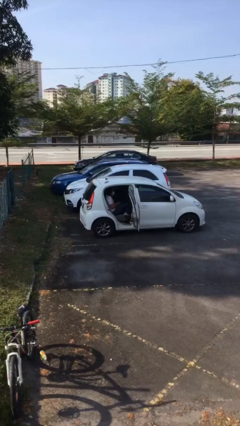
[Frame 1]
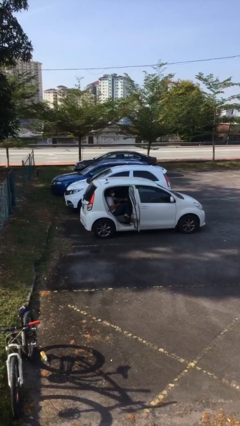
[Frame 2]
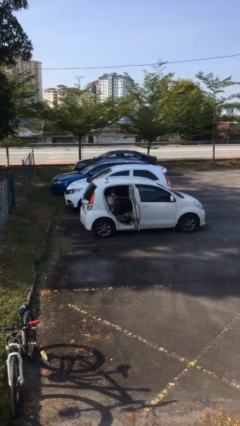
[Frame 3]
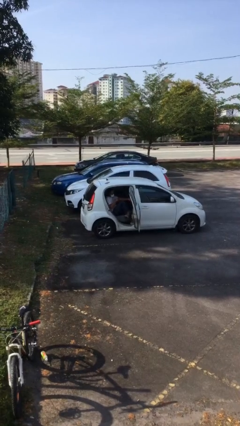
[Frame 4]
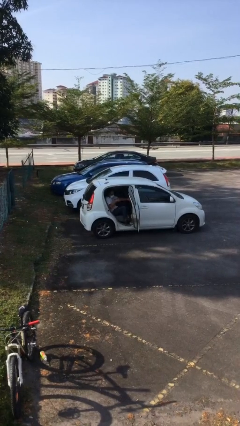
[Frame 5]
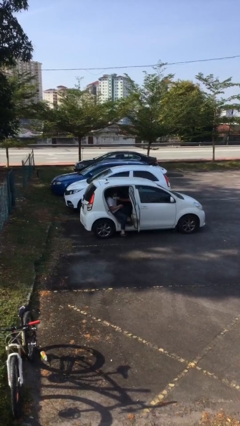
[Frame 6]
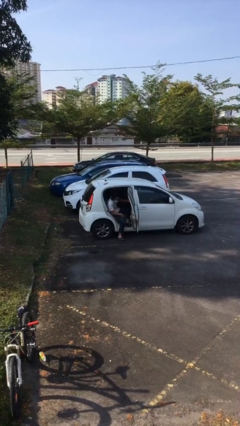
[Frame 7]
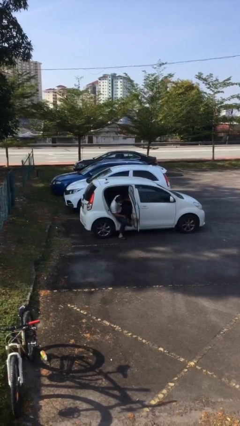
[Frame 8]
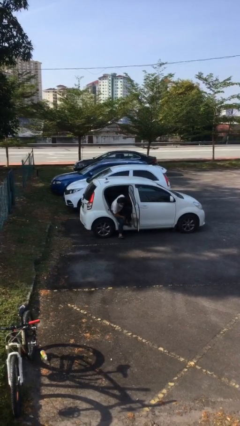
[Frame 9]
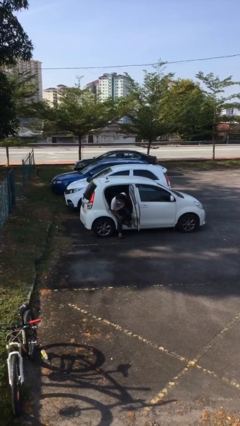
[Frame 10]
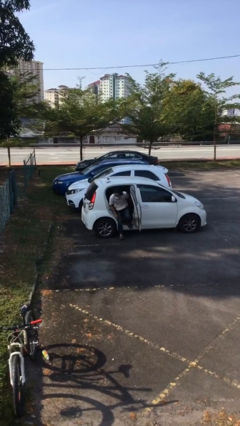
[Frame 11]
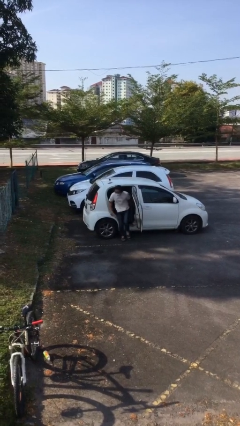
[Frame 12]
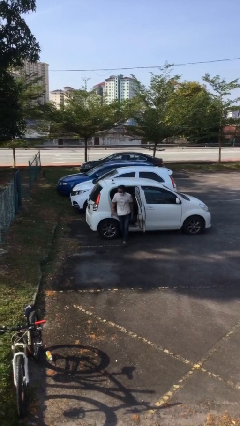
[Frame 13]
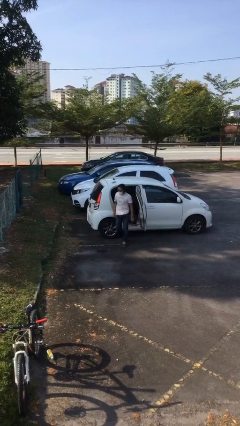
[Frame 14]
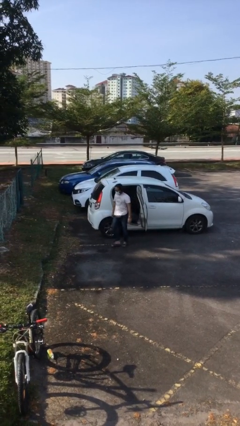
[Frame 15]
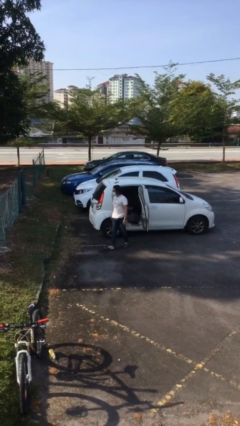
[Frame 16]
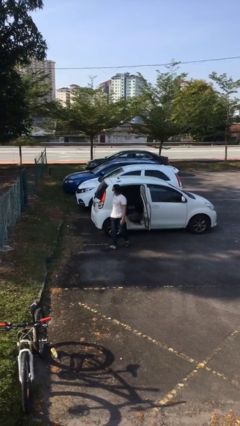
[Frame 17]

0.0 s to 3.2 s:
person exits car

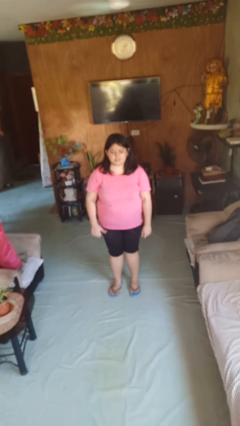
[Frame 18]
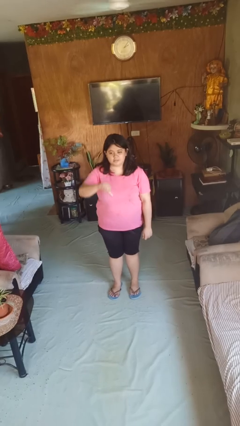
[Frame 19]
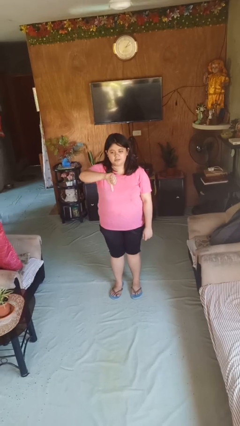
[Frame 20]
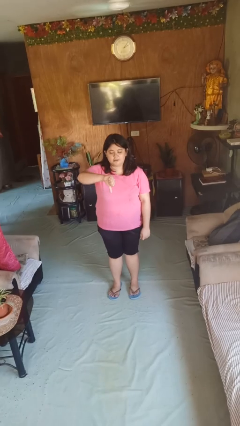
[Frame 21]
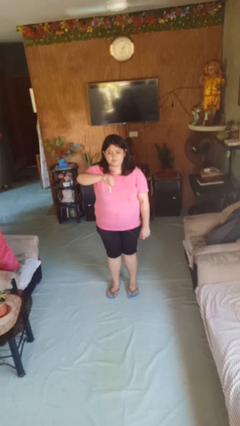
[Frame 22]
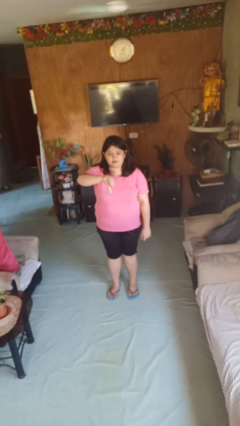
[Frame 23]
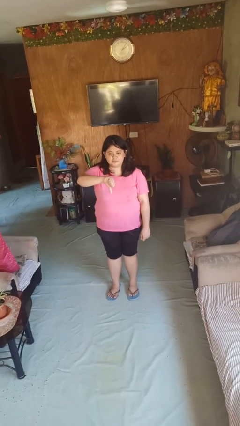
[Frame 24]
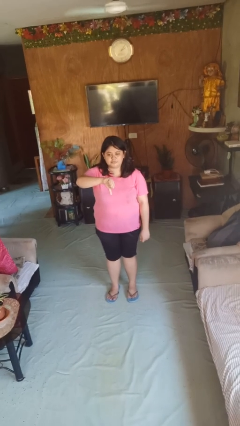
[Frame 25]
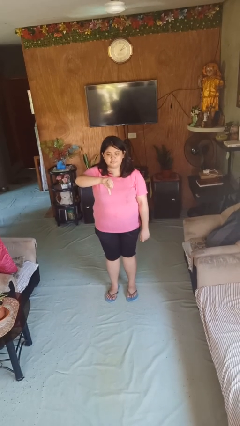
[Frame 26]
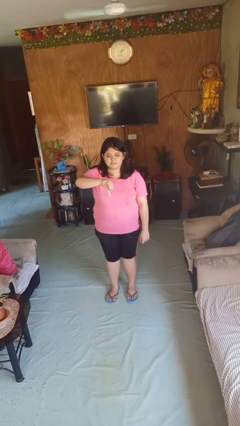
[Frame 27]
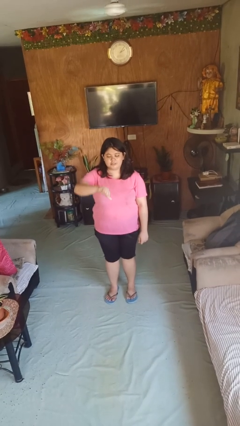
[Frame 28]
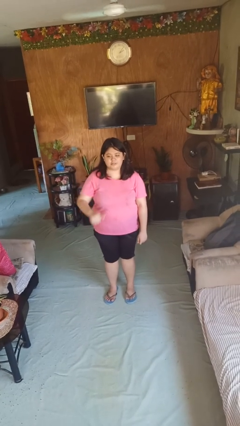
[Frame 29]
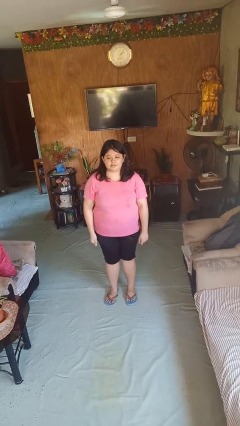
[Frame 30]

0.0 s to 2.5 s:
person gestures thumbs down

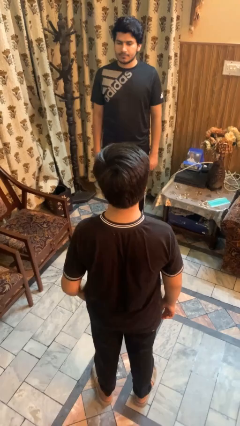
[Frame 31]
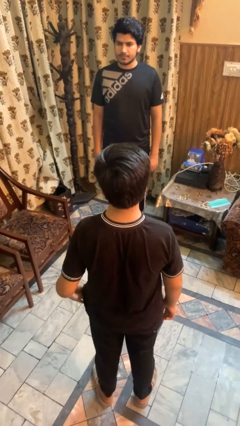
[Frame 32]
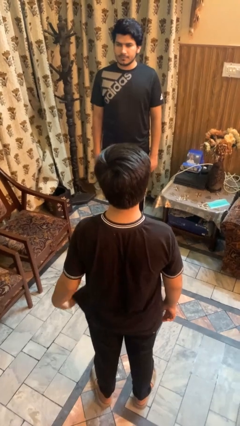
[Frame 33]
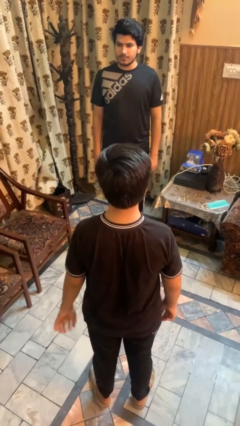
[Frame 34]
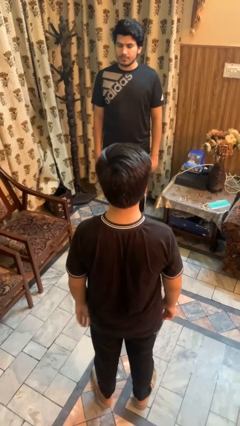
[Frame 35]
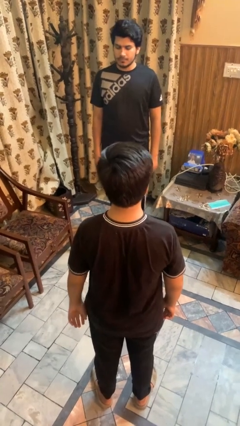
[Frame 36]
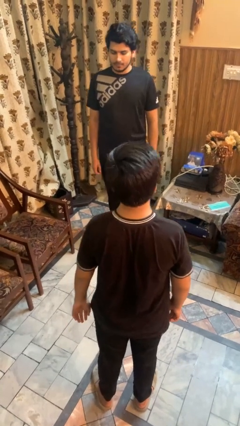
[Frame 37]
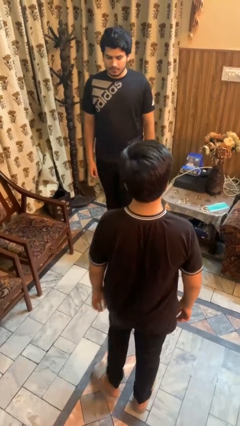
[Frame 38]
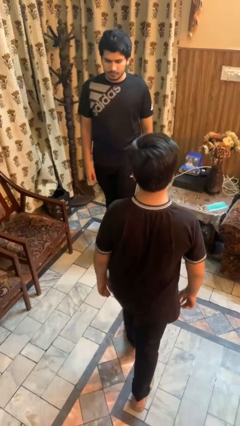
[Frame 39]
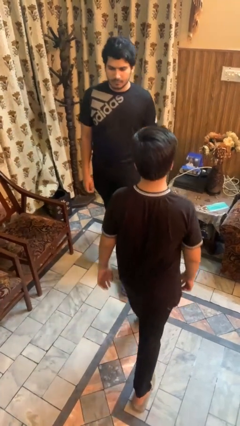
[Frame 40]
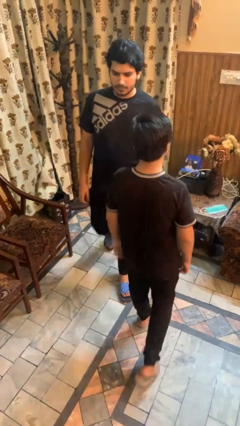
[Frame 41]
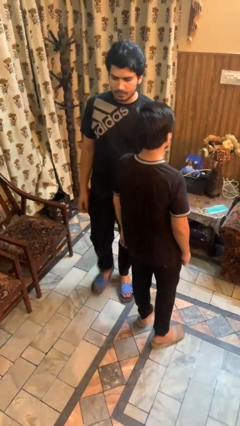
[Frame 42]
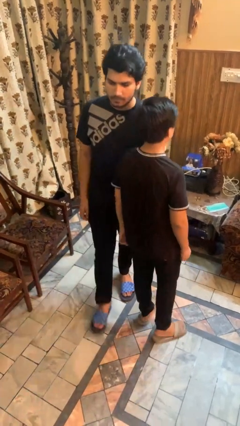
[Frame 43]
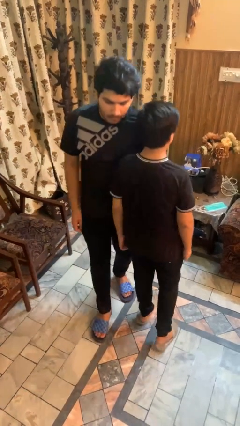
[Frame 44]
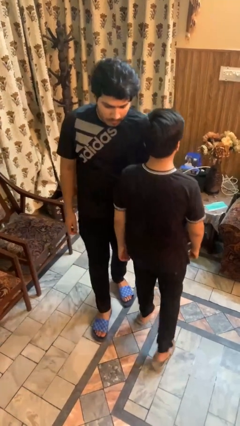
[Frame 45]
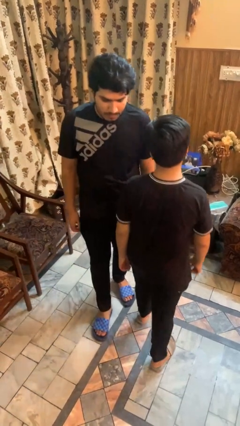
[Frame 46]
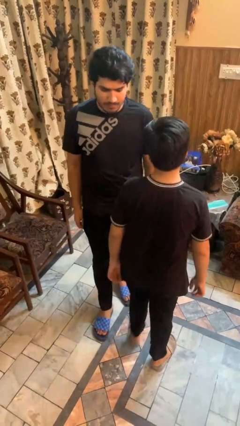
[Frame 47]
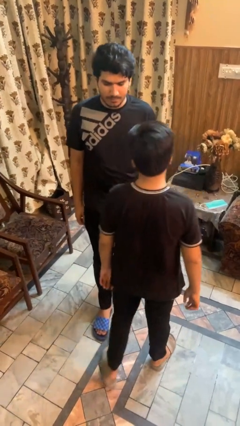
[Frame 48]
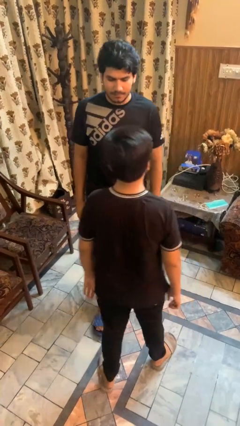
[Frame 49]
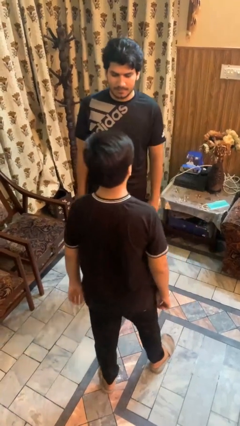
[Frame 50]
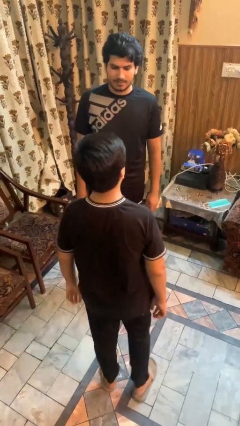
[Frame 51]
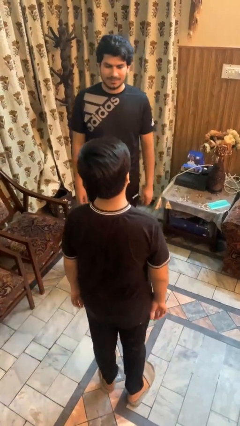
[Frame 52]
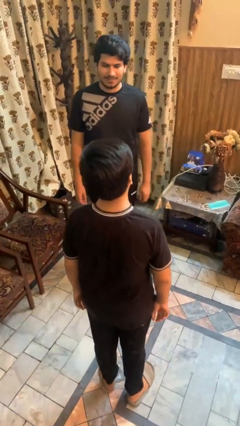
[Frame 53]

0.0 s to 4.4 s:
person bumps into person

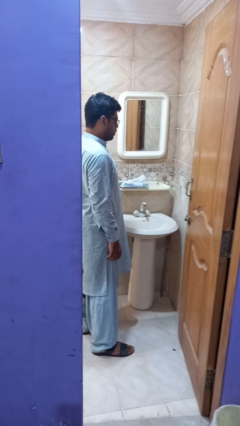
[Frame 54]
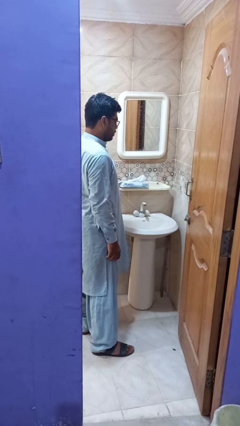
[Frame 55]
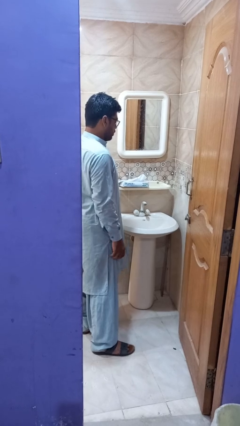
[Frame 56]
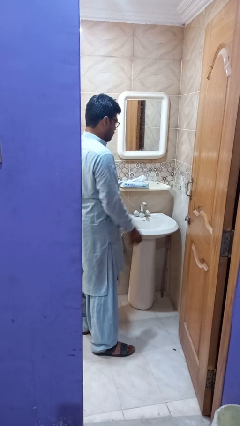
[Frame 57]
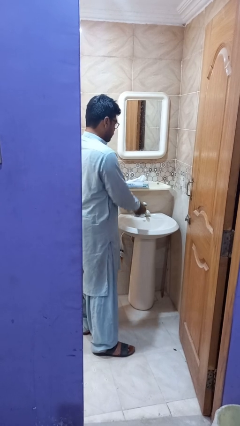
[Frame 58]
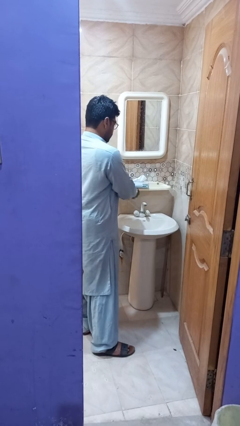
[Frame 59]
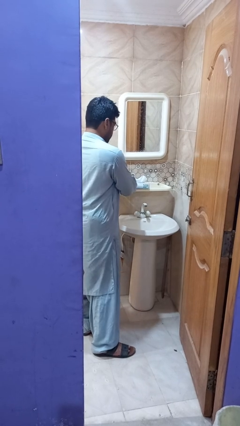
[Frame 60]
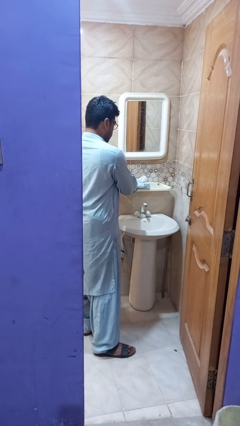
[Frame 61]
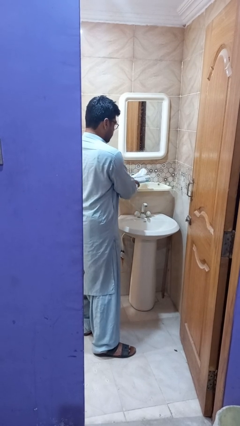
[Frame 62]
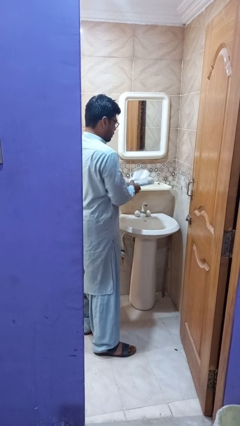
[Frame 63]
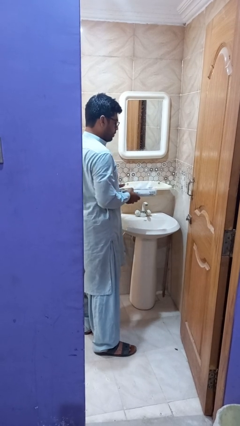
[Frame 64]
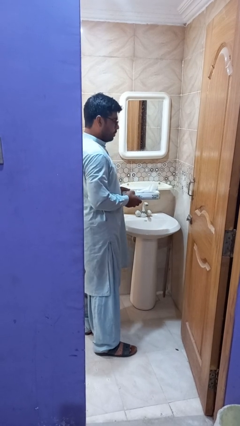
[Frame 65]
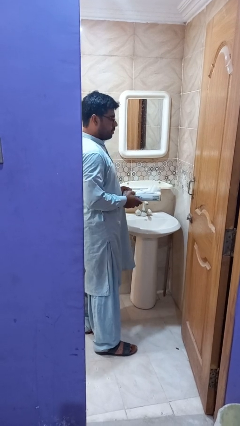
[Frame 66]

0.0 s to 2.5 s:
person picks up object from countertop

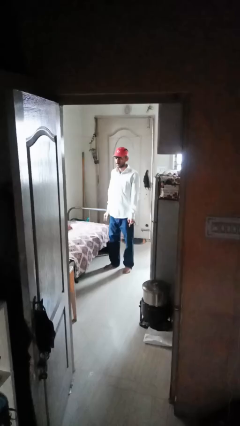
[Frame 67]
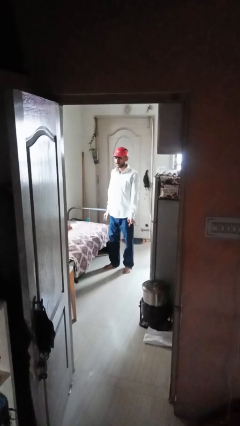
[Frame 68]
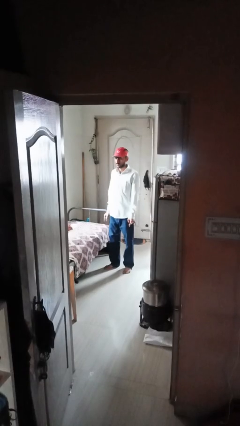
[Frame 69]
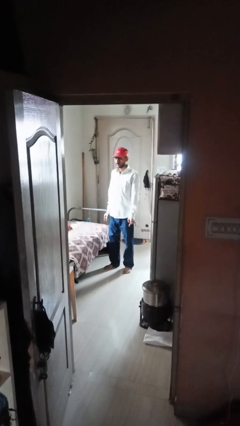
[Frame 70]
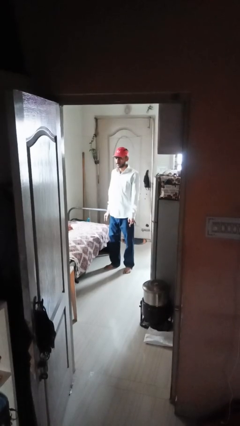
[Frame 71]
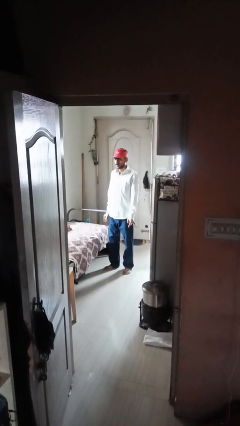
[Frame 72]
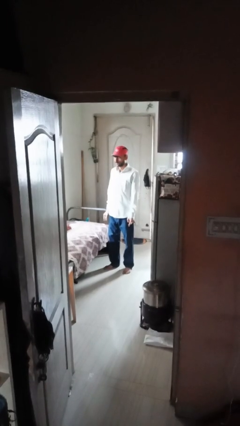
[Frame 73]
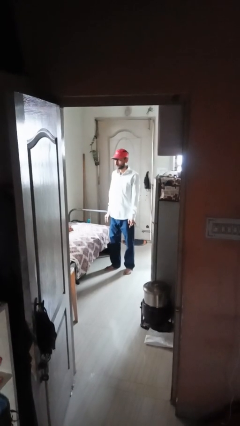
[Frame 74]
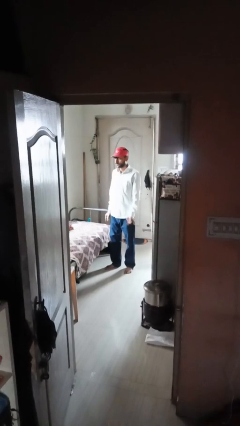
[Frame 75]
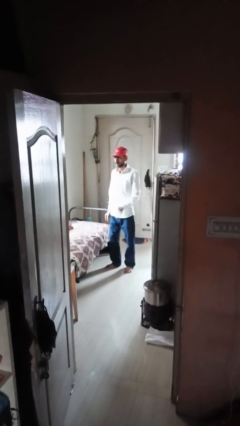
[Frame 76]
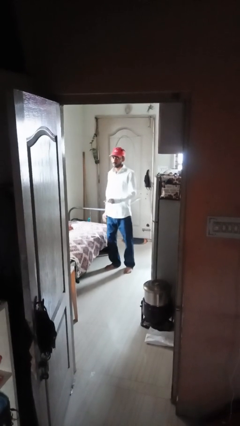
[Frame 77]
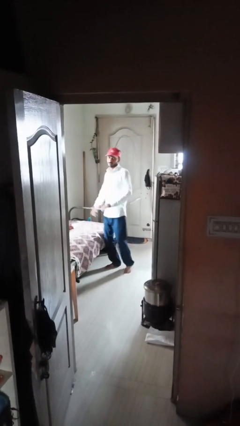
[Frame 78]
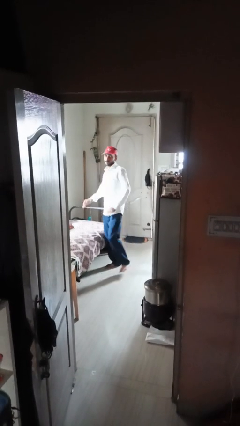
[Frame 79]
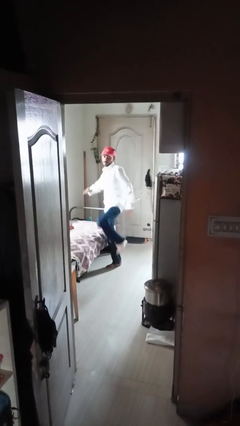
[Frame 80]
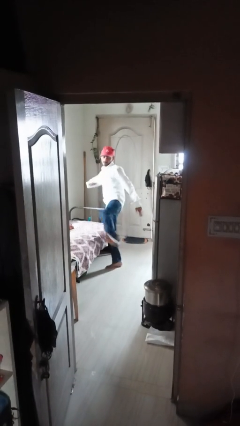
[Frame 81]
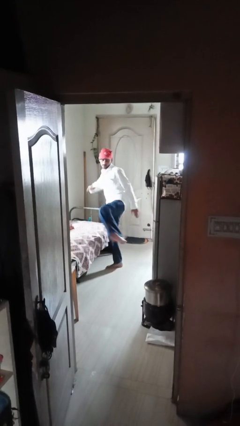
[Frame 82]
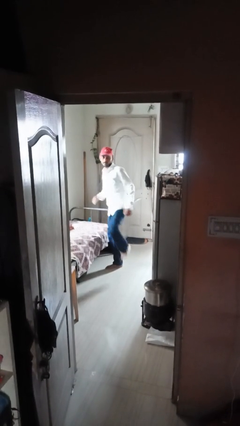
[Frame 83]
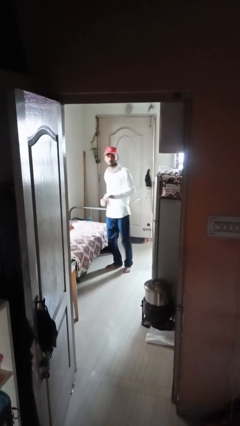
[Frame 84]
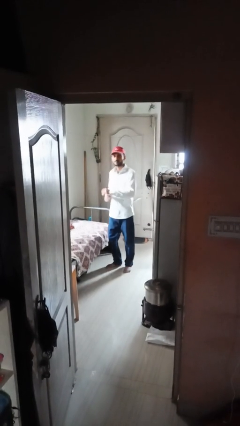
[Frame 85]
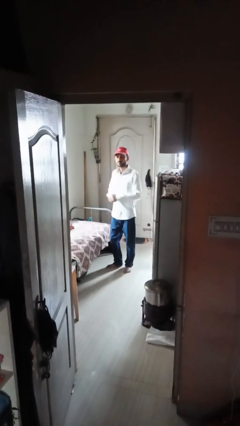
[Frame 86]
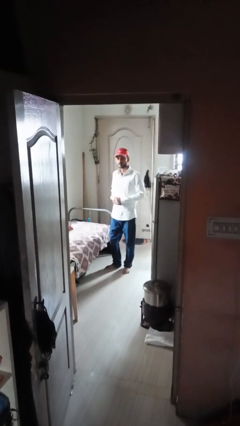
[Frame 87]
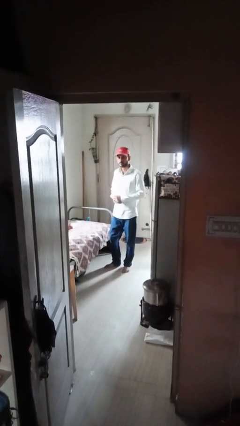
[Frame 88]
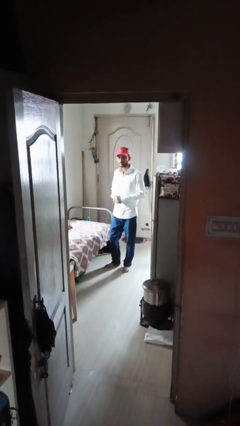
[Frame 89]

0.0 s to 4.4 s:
person karate kicks

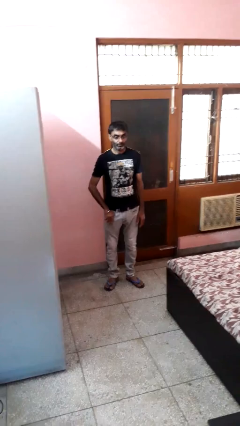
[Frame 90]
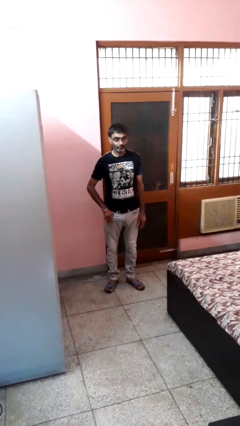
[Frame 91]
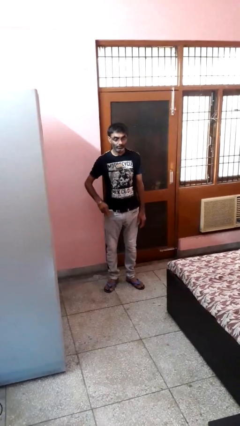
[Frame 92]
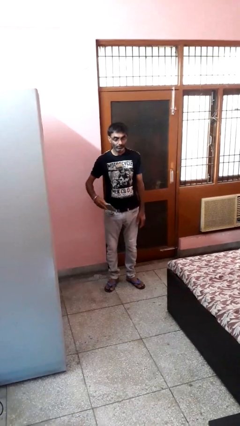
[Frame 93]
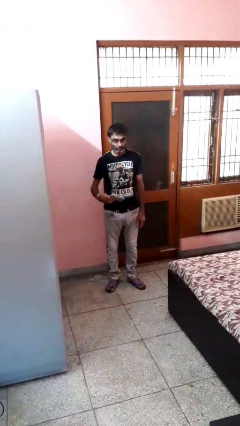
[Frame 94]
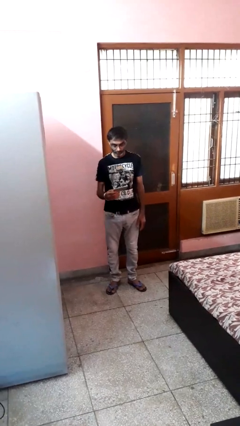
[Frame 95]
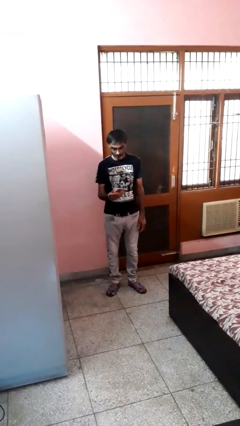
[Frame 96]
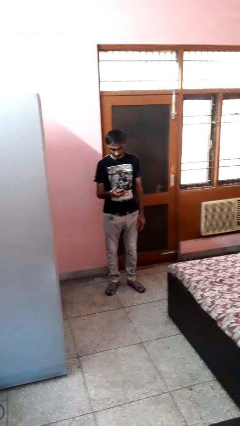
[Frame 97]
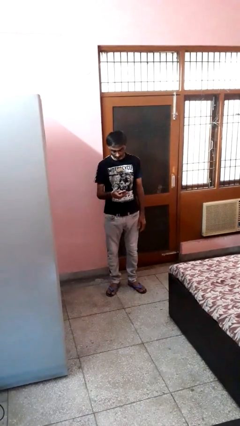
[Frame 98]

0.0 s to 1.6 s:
person takes phone from pocket
